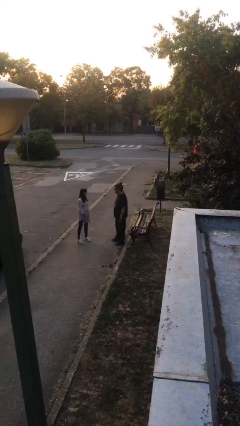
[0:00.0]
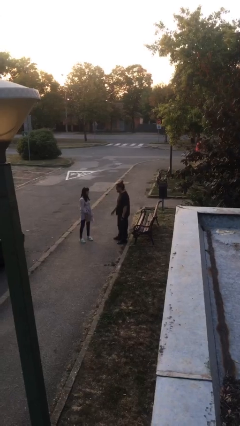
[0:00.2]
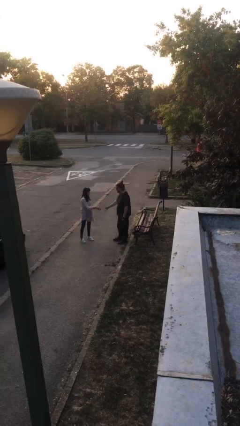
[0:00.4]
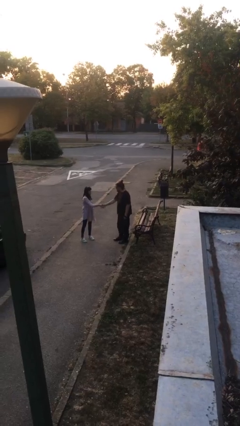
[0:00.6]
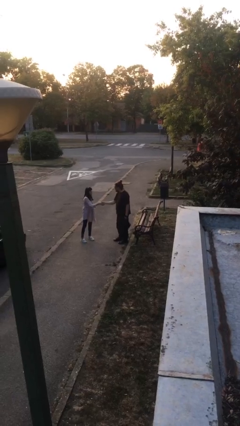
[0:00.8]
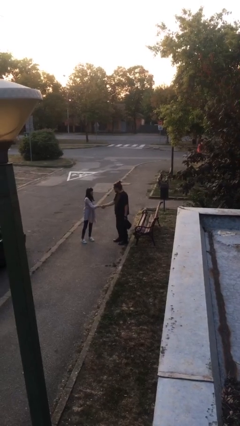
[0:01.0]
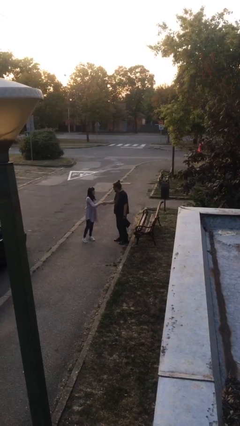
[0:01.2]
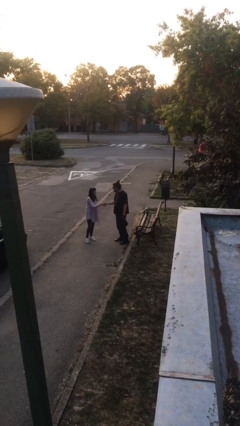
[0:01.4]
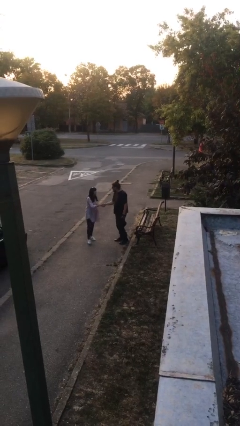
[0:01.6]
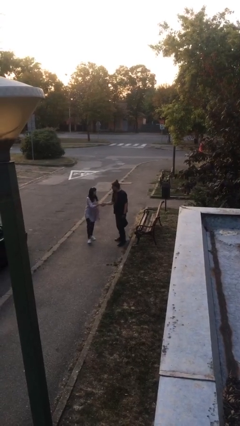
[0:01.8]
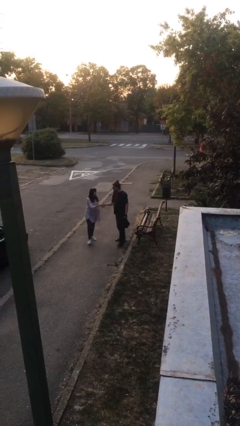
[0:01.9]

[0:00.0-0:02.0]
person shakes hand

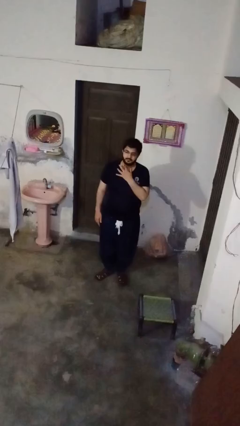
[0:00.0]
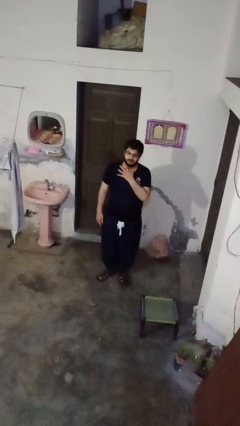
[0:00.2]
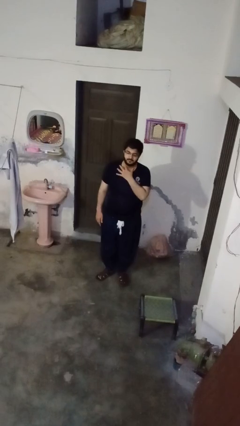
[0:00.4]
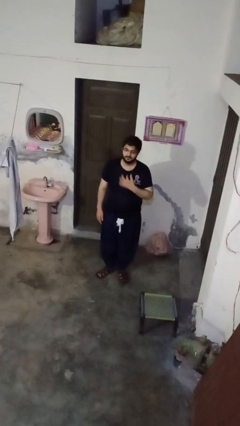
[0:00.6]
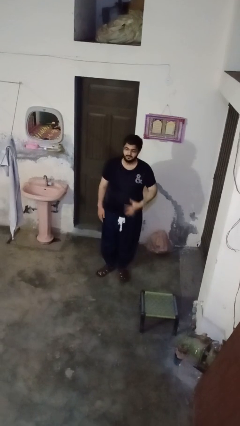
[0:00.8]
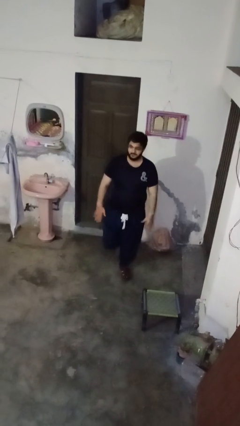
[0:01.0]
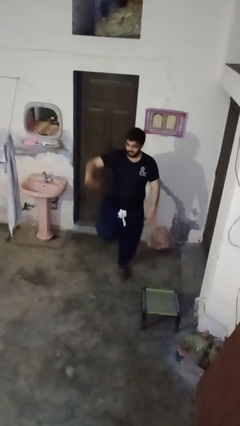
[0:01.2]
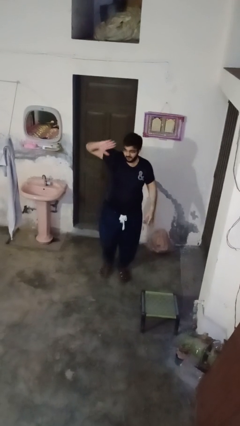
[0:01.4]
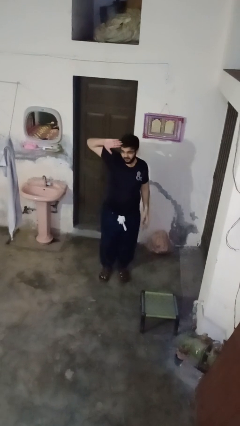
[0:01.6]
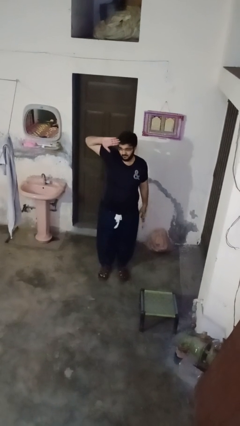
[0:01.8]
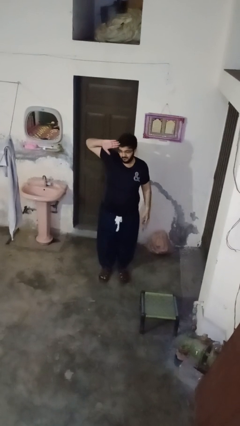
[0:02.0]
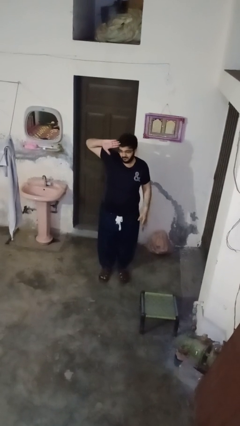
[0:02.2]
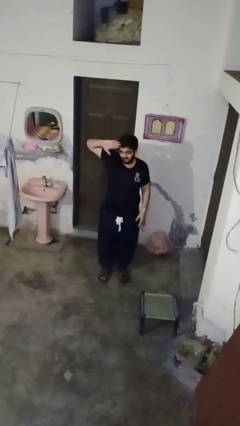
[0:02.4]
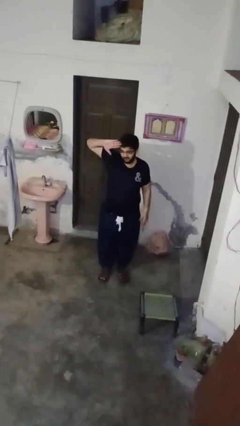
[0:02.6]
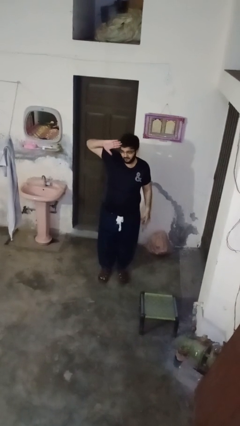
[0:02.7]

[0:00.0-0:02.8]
person salutes

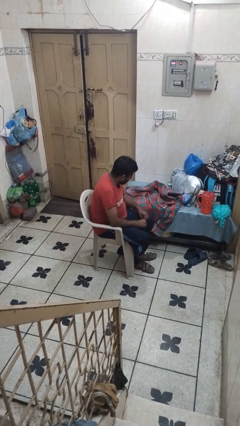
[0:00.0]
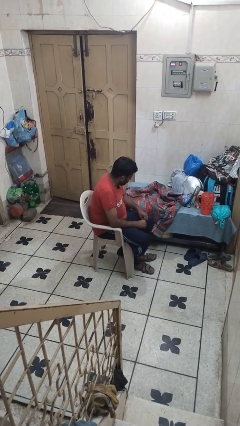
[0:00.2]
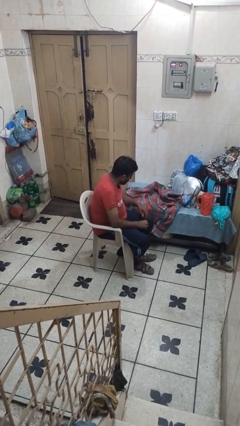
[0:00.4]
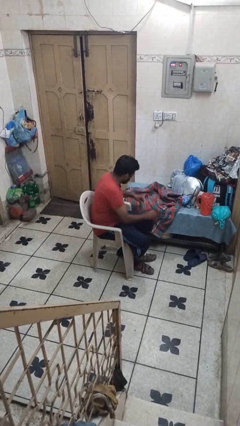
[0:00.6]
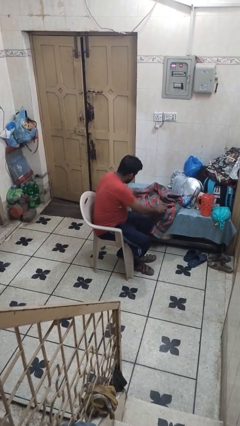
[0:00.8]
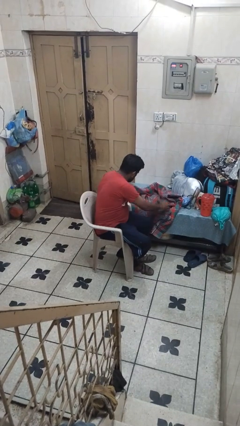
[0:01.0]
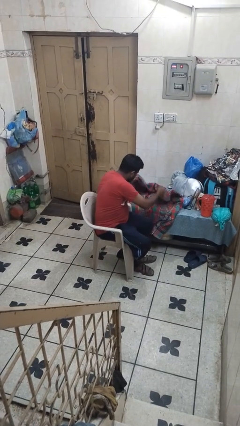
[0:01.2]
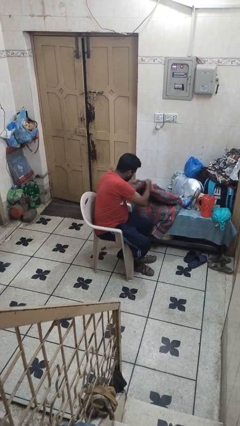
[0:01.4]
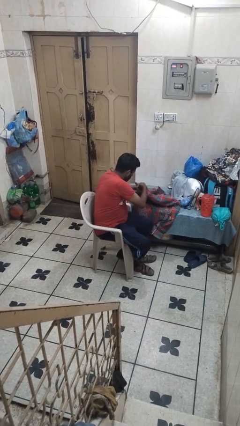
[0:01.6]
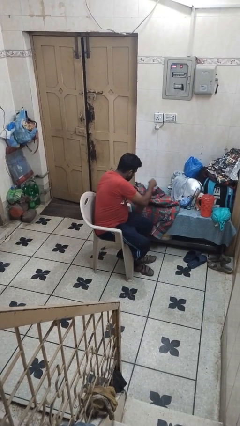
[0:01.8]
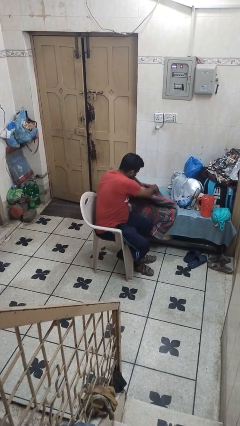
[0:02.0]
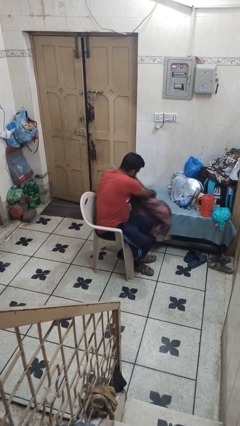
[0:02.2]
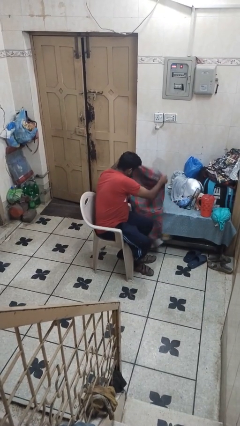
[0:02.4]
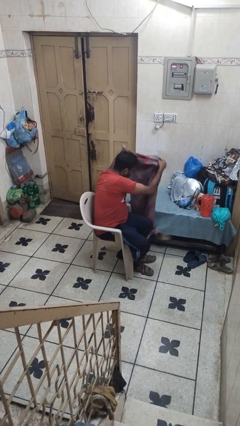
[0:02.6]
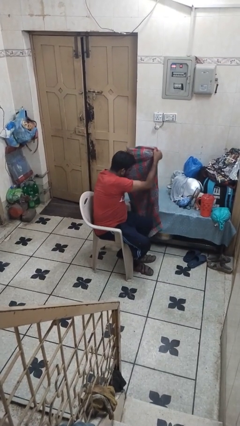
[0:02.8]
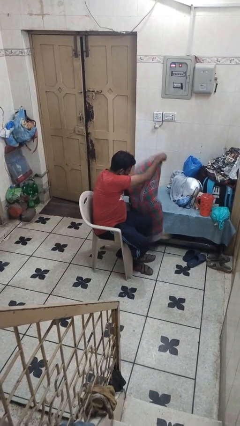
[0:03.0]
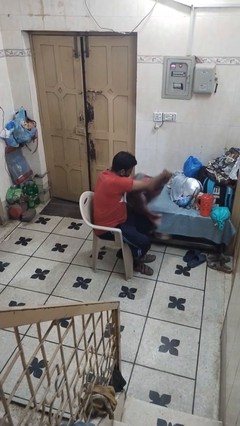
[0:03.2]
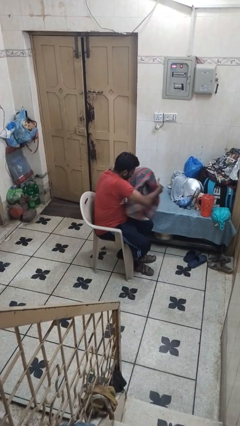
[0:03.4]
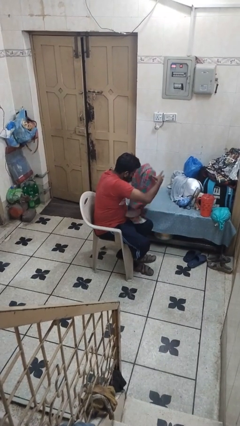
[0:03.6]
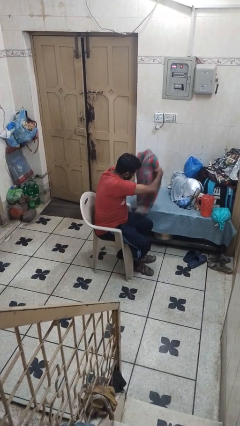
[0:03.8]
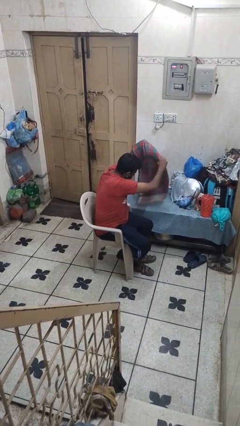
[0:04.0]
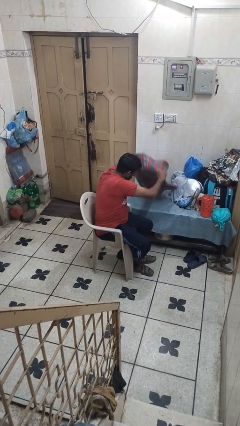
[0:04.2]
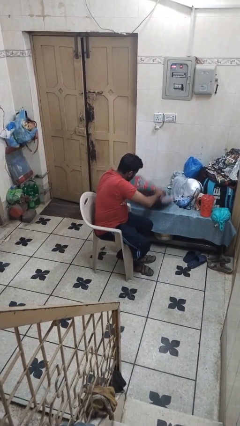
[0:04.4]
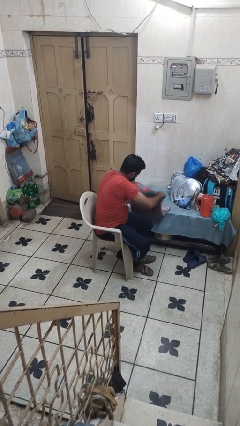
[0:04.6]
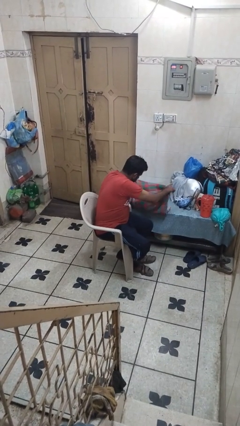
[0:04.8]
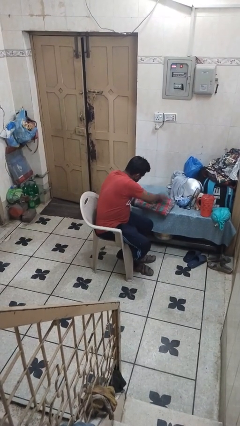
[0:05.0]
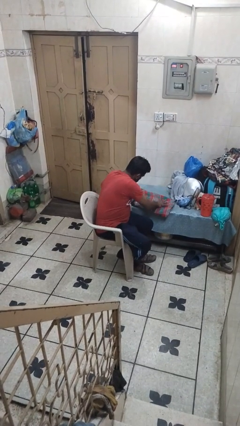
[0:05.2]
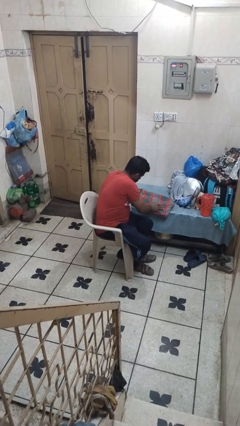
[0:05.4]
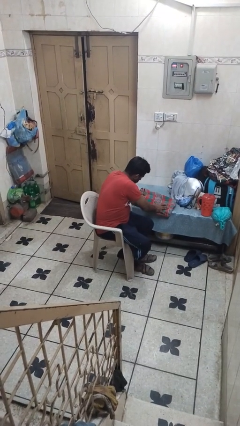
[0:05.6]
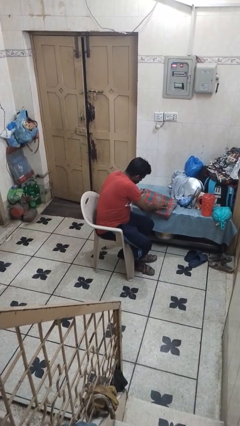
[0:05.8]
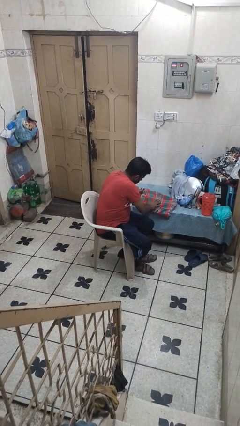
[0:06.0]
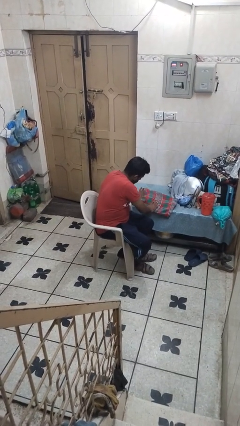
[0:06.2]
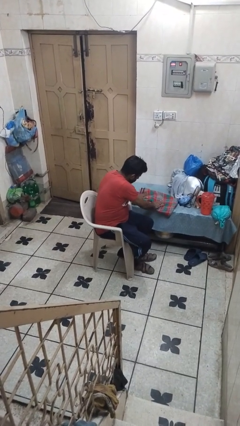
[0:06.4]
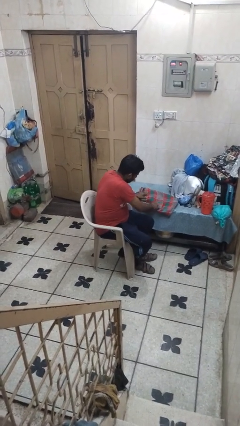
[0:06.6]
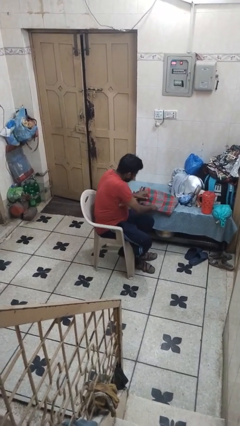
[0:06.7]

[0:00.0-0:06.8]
person folds blanket

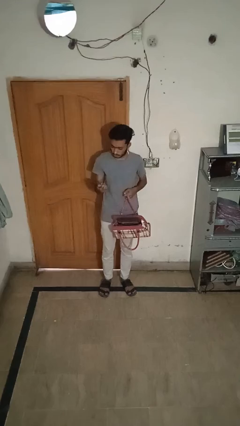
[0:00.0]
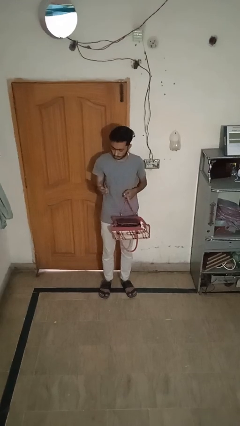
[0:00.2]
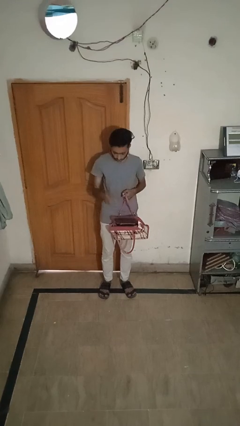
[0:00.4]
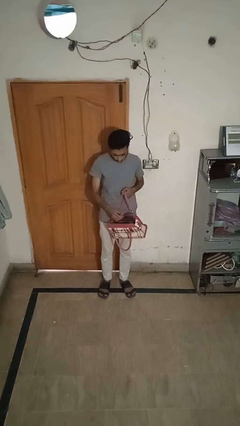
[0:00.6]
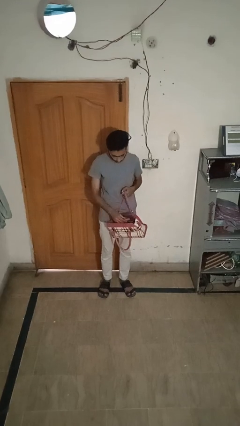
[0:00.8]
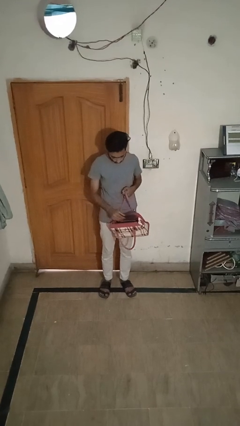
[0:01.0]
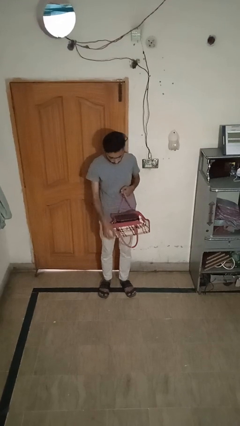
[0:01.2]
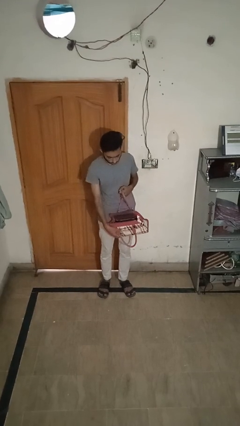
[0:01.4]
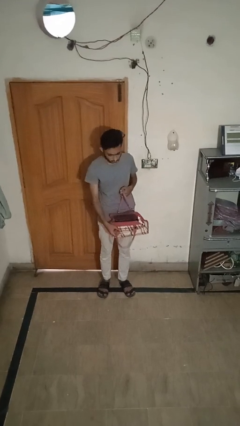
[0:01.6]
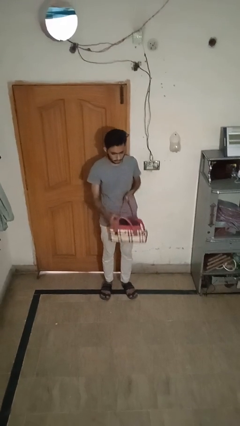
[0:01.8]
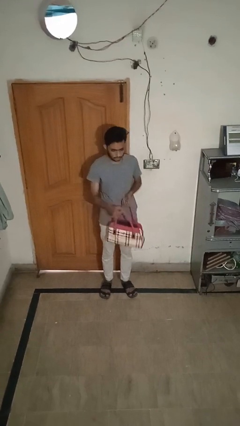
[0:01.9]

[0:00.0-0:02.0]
person puts object into purse

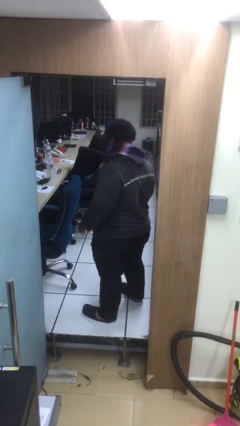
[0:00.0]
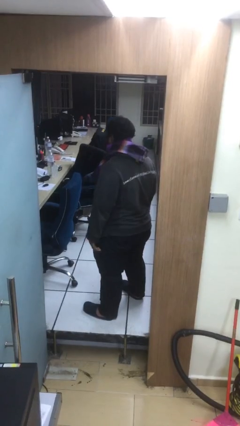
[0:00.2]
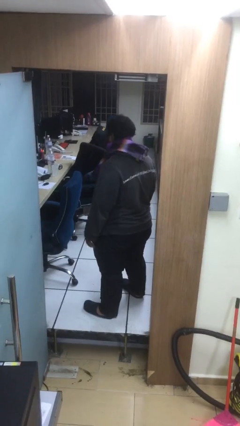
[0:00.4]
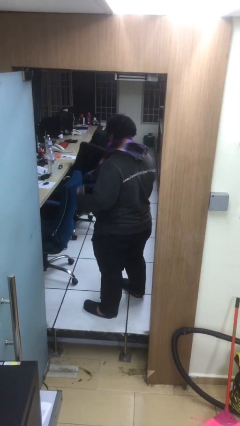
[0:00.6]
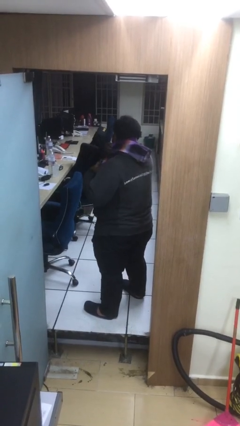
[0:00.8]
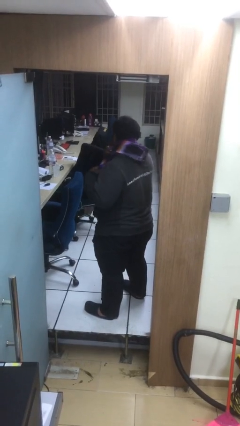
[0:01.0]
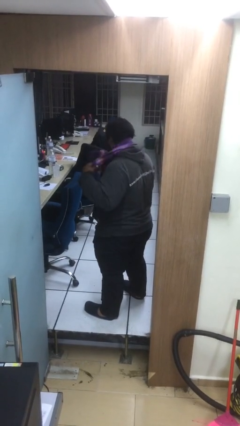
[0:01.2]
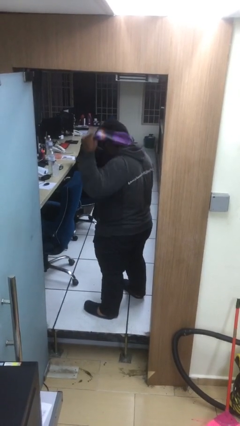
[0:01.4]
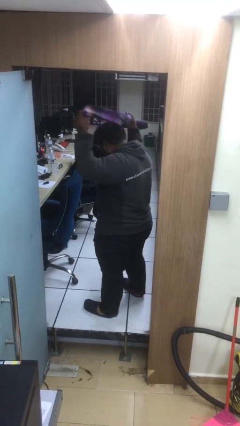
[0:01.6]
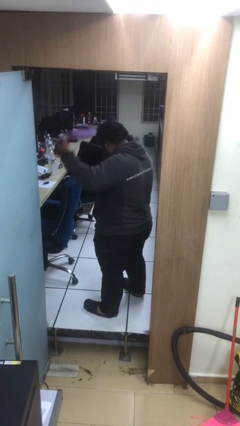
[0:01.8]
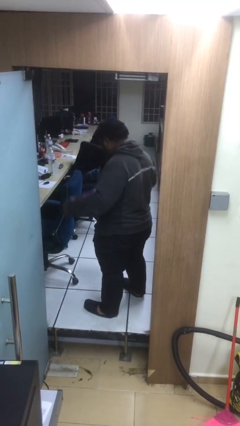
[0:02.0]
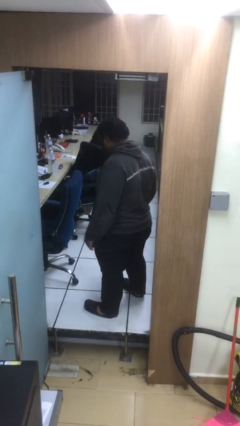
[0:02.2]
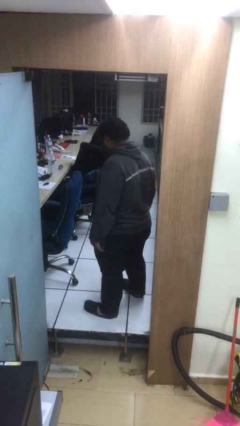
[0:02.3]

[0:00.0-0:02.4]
person takes off scarf

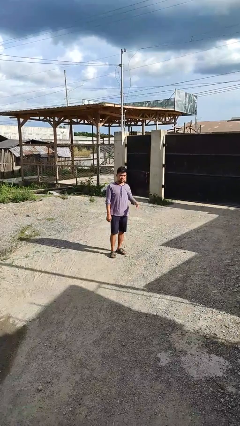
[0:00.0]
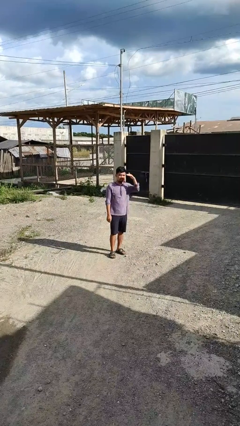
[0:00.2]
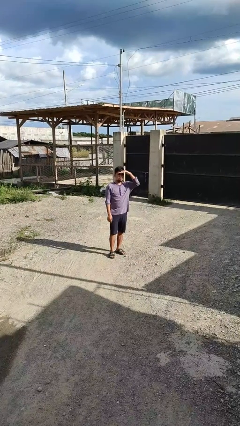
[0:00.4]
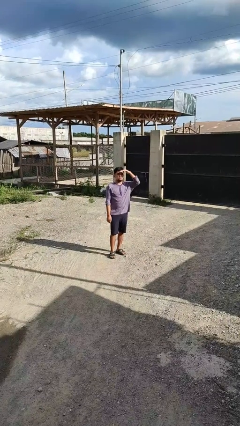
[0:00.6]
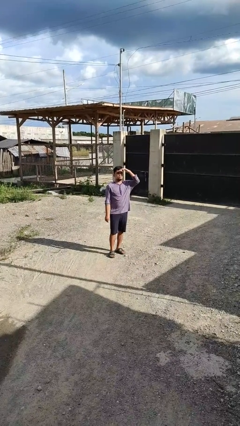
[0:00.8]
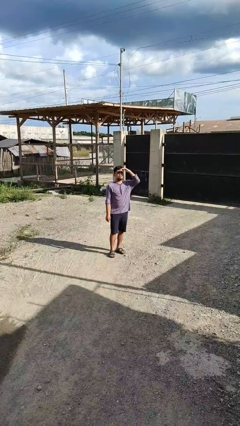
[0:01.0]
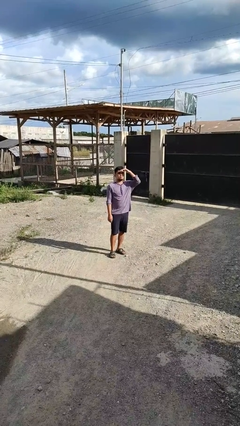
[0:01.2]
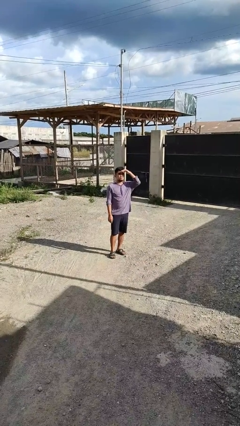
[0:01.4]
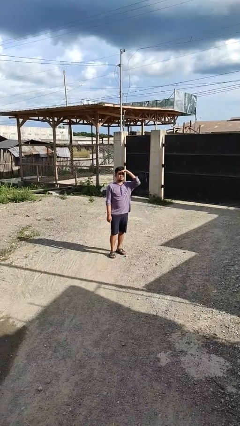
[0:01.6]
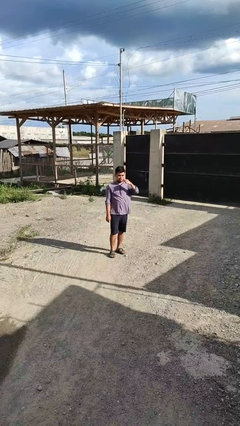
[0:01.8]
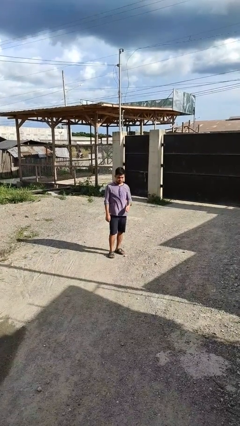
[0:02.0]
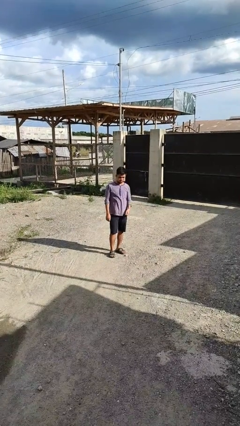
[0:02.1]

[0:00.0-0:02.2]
person shades eyes
